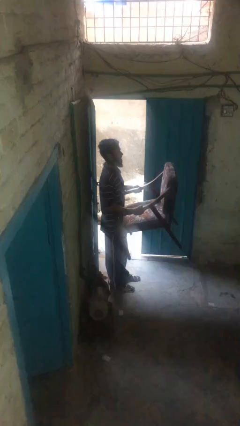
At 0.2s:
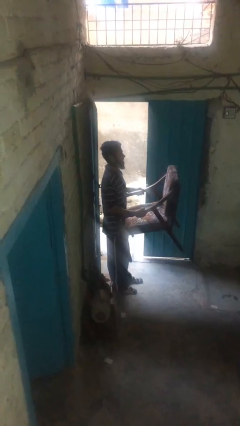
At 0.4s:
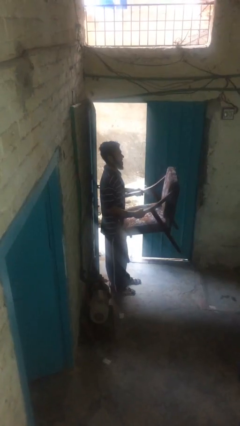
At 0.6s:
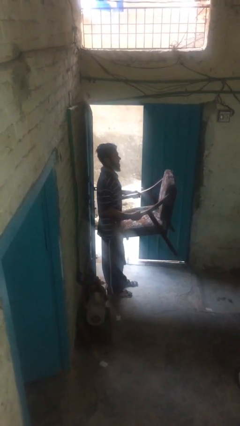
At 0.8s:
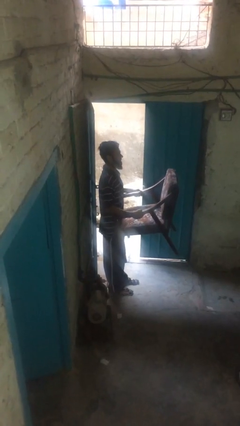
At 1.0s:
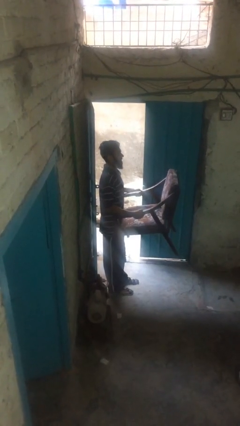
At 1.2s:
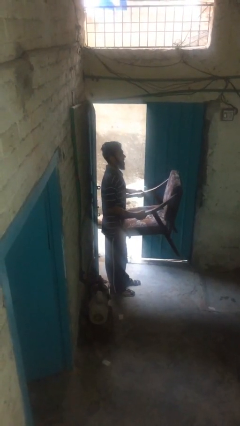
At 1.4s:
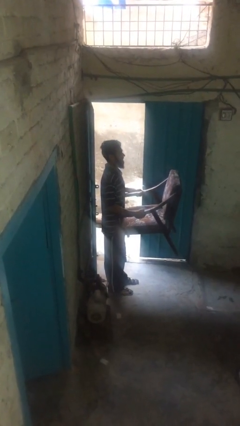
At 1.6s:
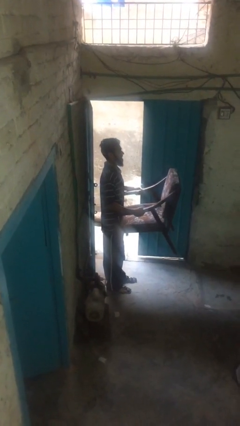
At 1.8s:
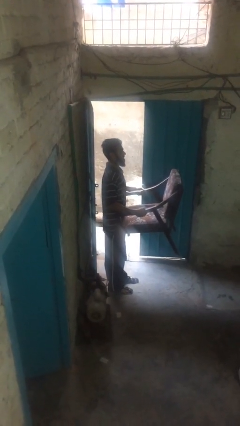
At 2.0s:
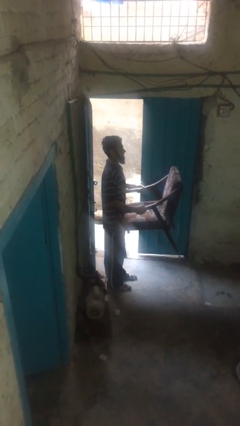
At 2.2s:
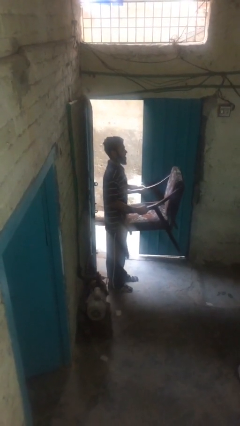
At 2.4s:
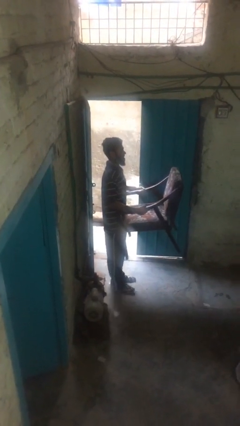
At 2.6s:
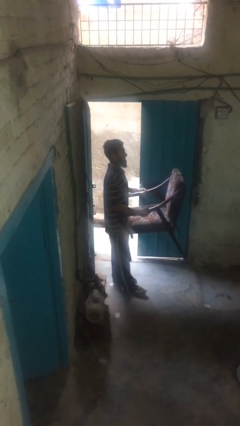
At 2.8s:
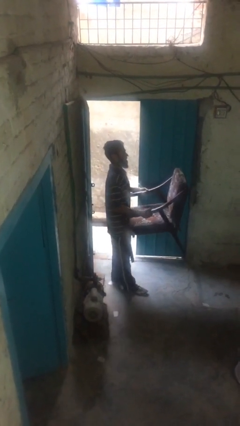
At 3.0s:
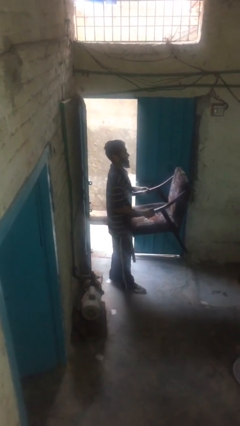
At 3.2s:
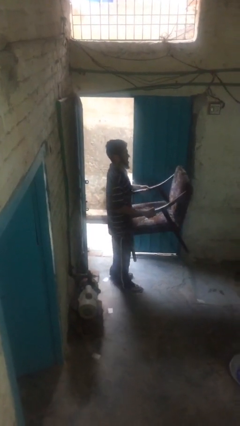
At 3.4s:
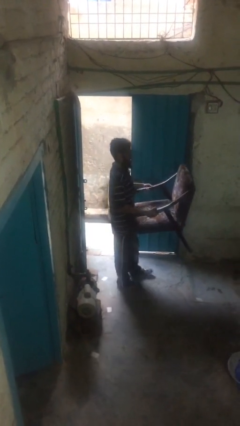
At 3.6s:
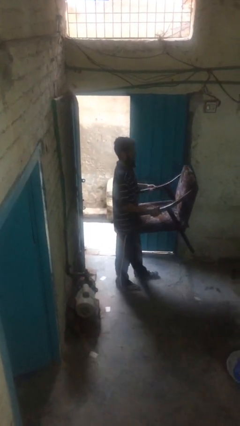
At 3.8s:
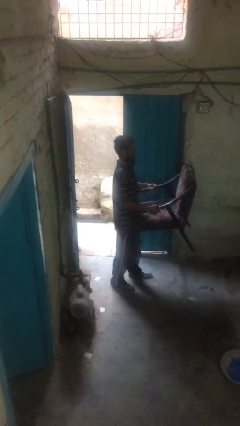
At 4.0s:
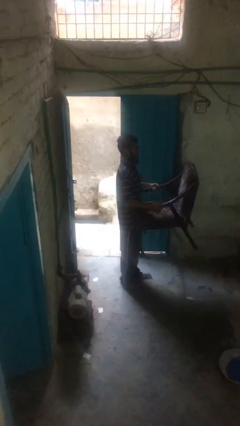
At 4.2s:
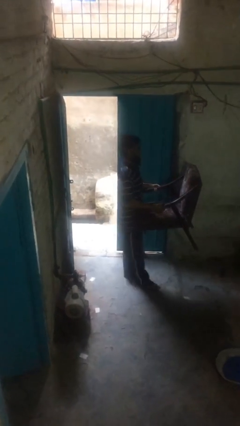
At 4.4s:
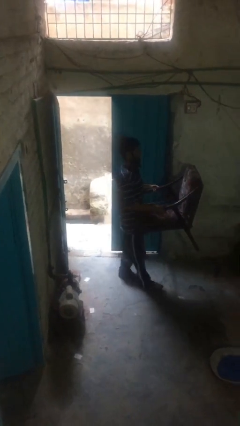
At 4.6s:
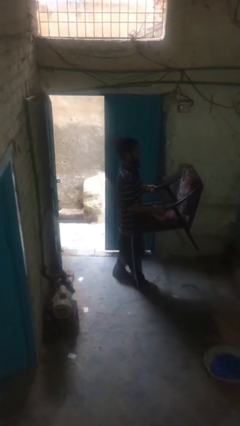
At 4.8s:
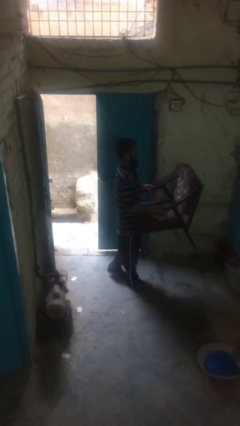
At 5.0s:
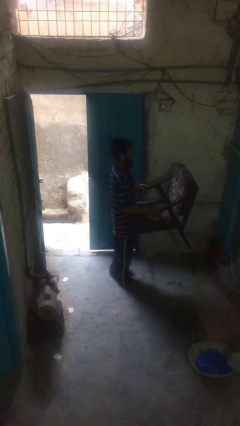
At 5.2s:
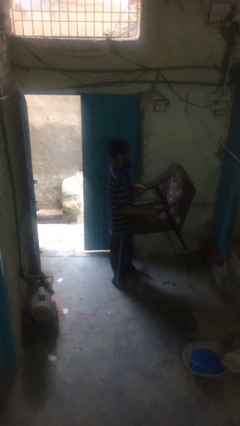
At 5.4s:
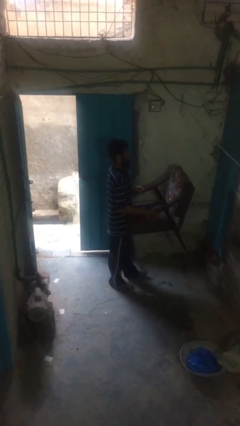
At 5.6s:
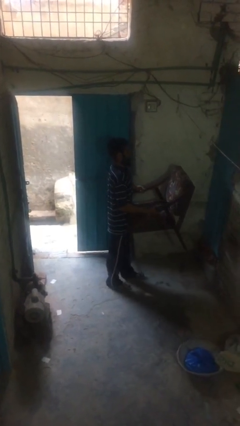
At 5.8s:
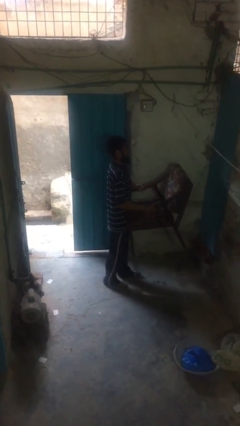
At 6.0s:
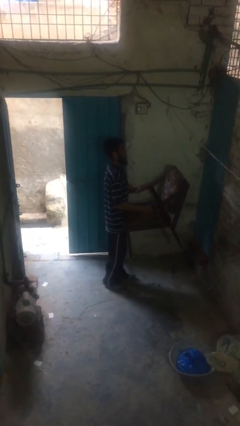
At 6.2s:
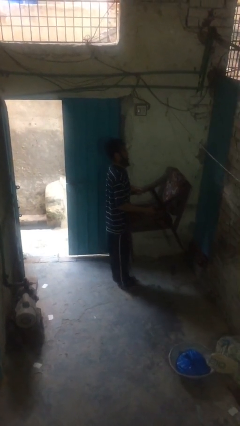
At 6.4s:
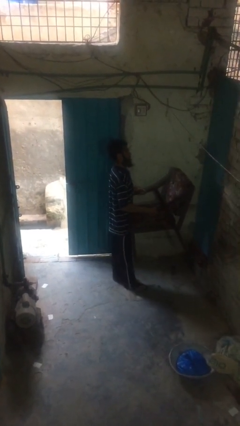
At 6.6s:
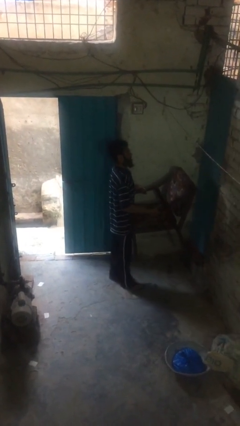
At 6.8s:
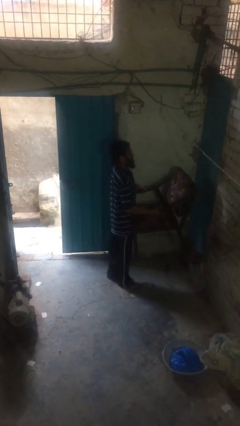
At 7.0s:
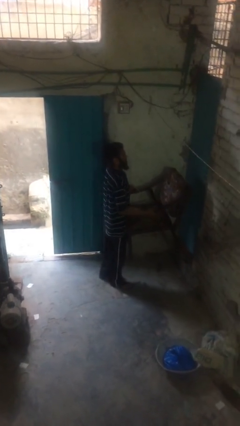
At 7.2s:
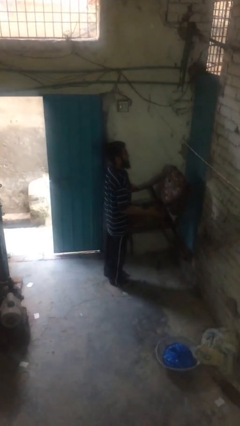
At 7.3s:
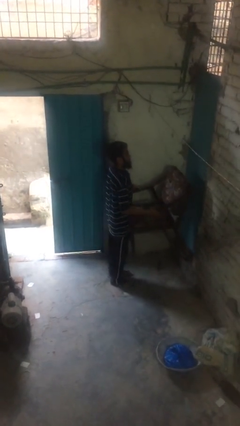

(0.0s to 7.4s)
person carries heavy object

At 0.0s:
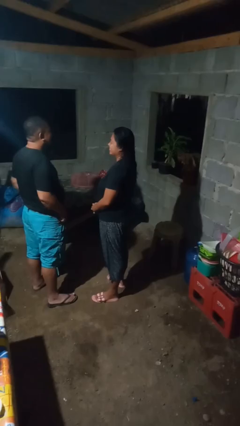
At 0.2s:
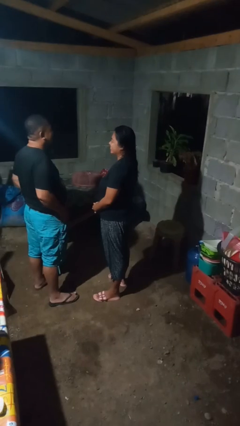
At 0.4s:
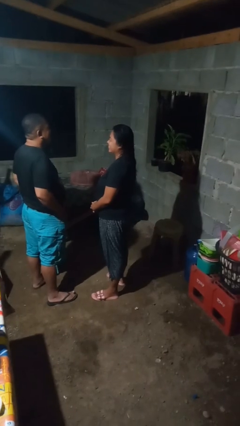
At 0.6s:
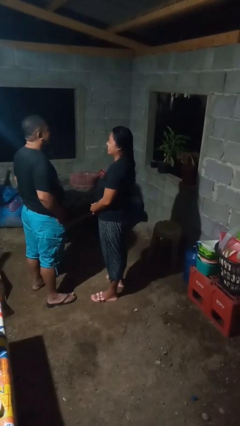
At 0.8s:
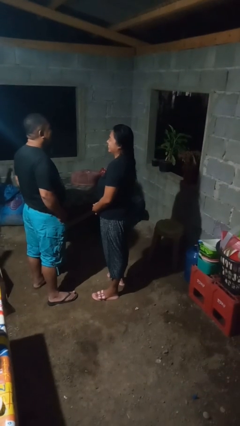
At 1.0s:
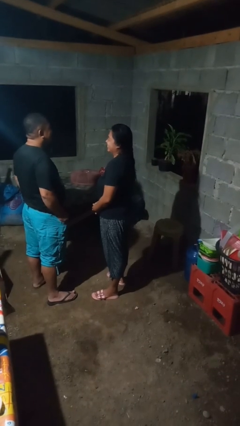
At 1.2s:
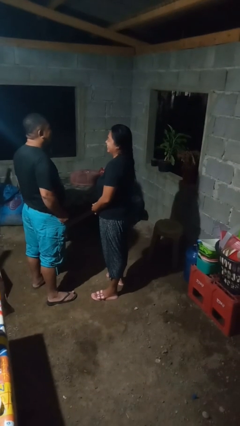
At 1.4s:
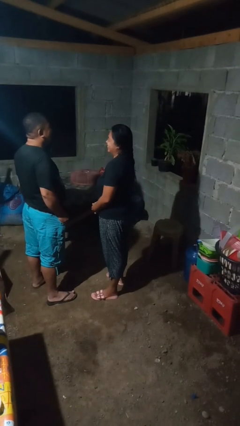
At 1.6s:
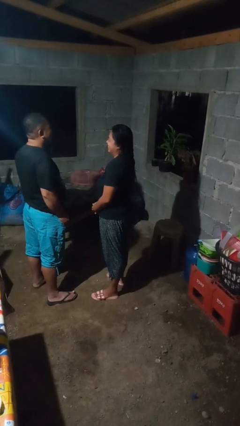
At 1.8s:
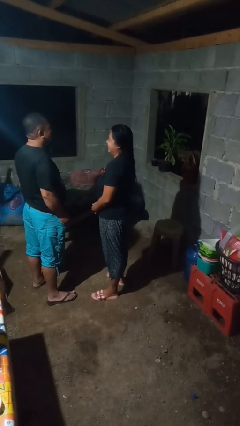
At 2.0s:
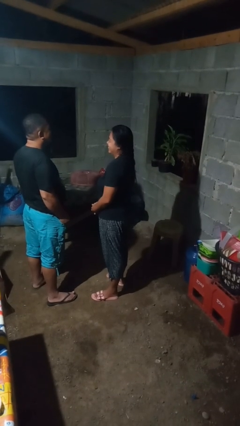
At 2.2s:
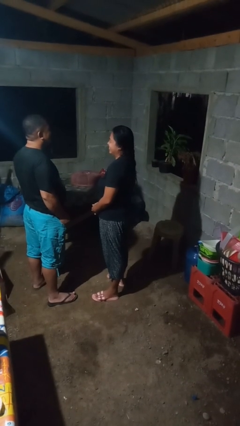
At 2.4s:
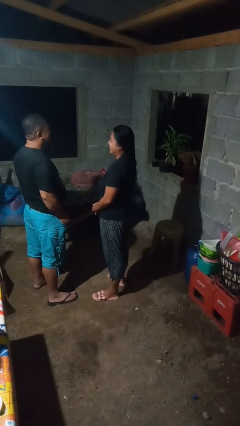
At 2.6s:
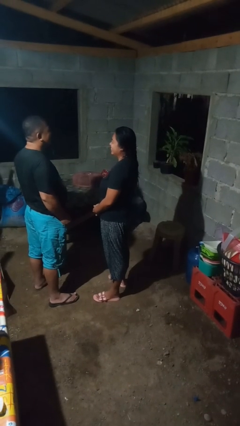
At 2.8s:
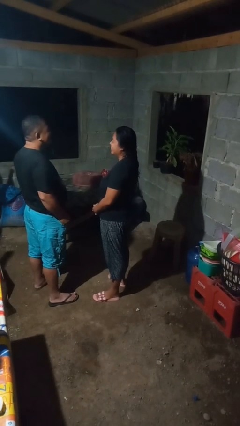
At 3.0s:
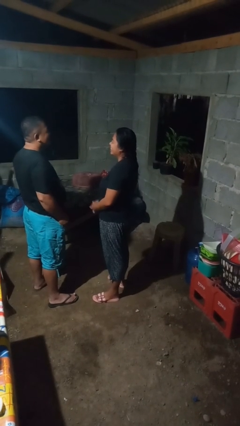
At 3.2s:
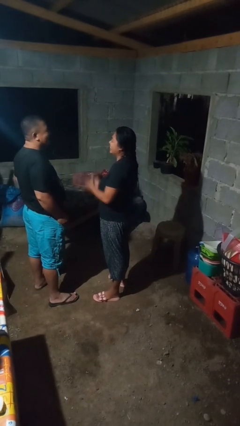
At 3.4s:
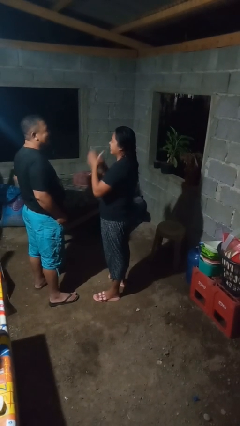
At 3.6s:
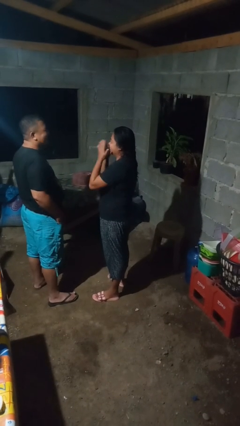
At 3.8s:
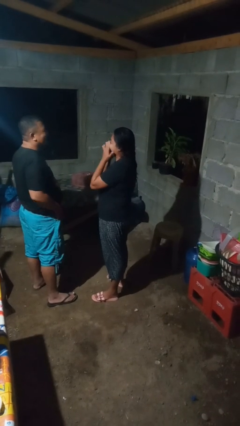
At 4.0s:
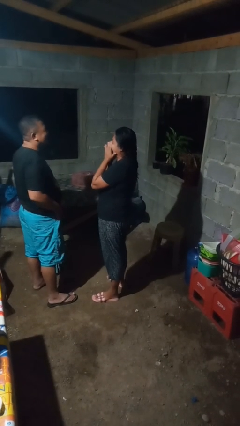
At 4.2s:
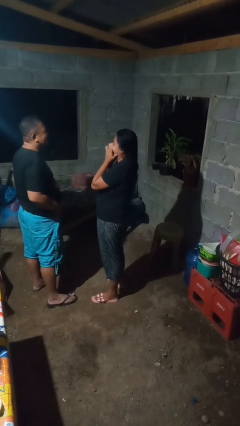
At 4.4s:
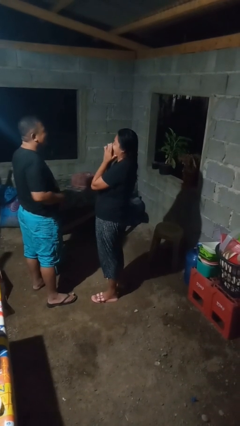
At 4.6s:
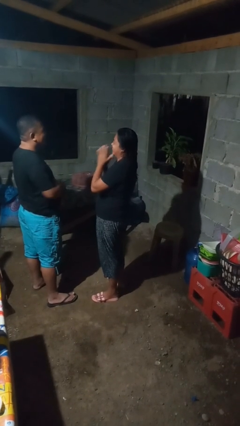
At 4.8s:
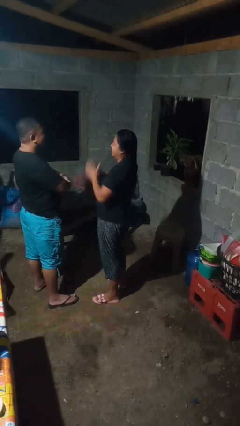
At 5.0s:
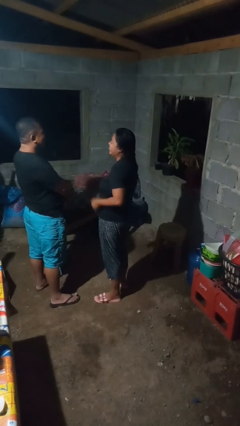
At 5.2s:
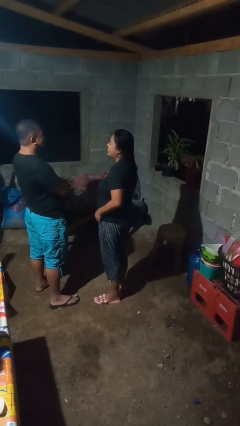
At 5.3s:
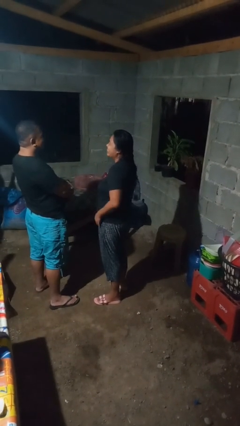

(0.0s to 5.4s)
person laughs with person

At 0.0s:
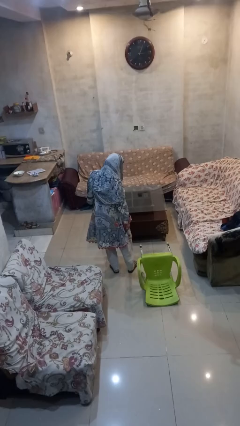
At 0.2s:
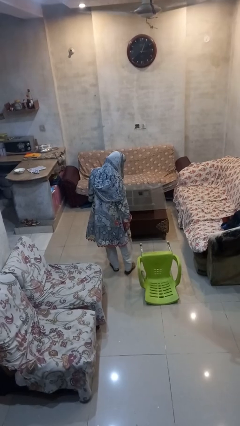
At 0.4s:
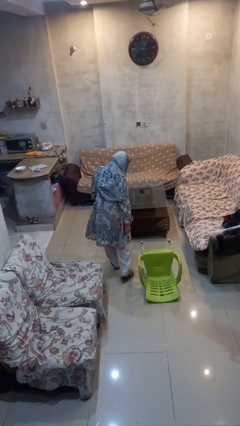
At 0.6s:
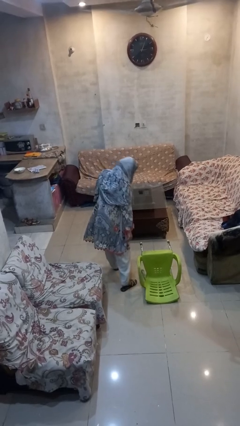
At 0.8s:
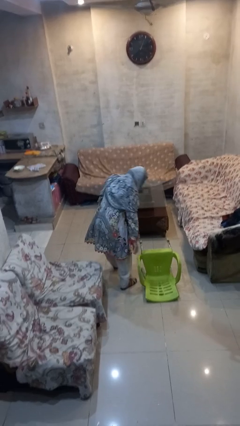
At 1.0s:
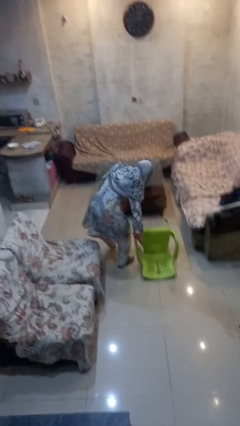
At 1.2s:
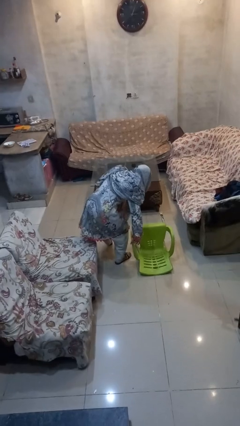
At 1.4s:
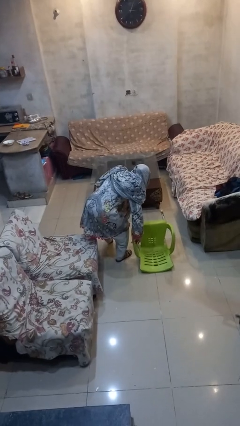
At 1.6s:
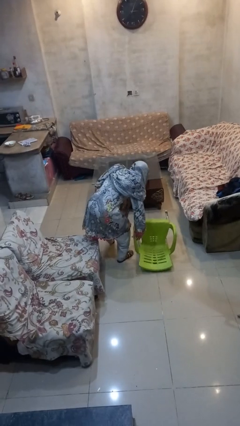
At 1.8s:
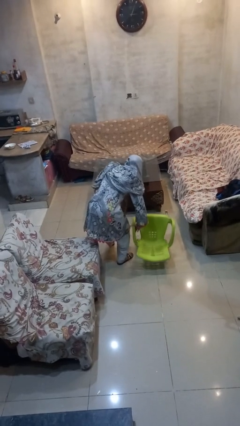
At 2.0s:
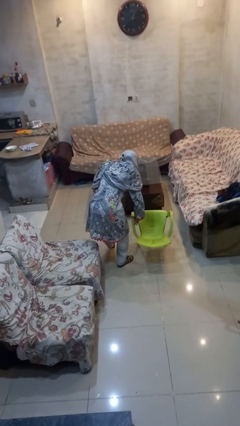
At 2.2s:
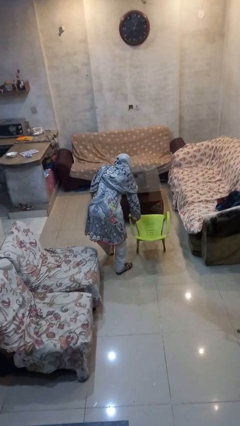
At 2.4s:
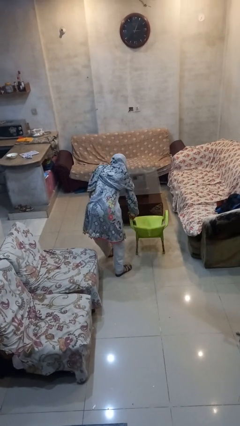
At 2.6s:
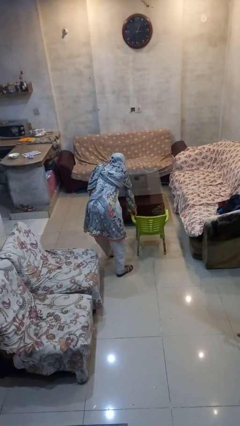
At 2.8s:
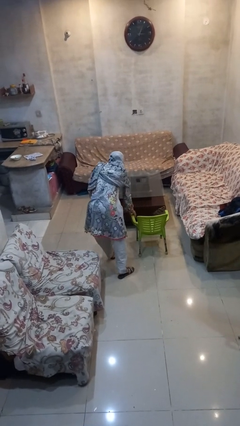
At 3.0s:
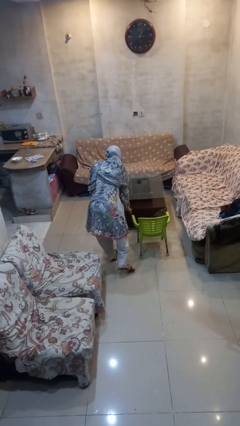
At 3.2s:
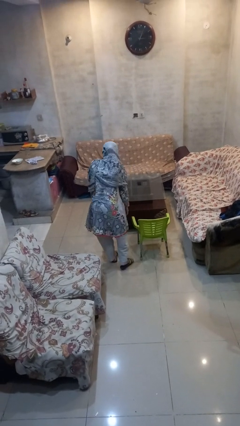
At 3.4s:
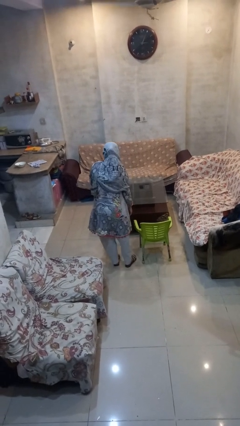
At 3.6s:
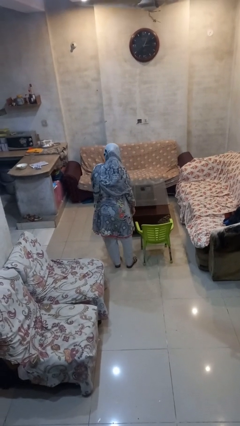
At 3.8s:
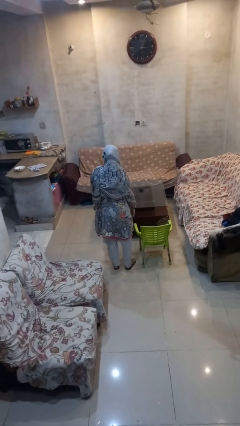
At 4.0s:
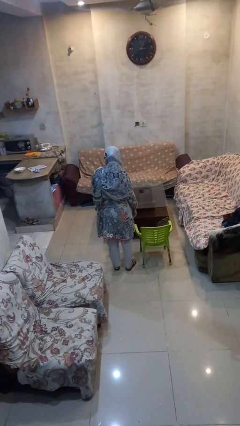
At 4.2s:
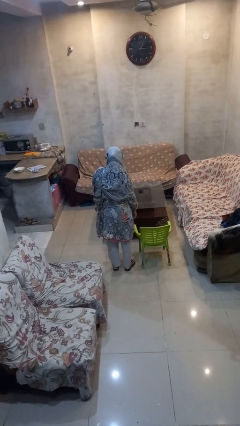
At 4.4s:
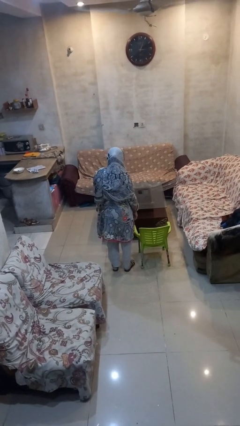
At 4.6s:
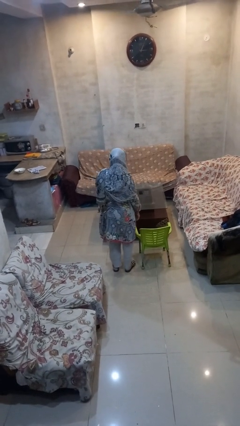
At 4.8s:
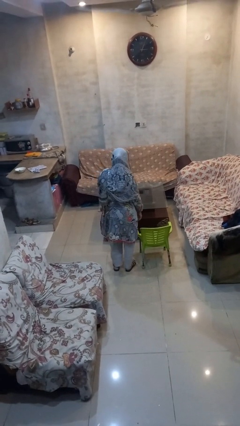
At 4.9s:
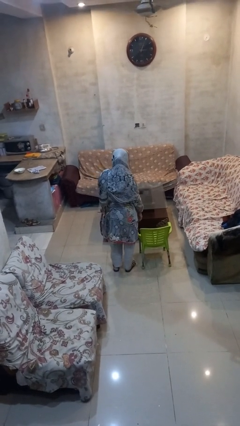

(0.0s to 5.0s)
person sets upright furniture

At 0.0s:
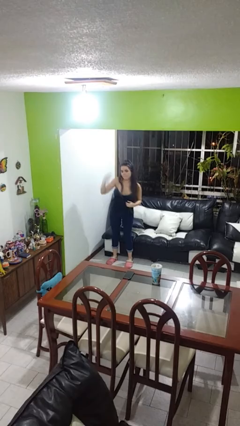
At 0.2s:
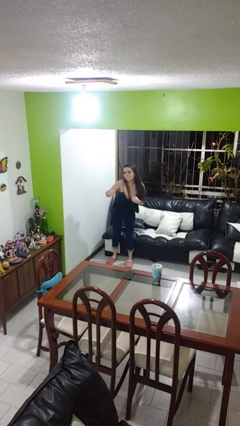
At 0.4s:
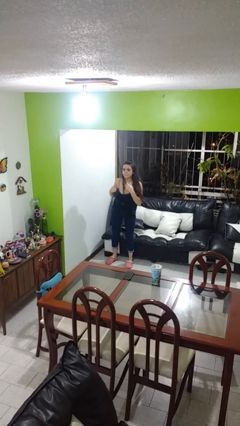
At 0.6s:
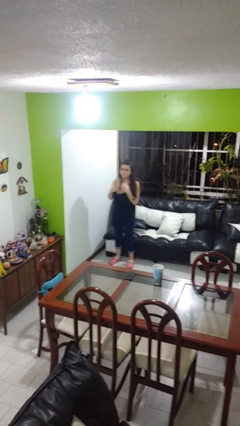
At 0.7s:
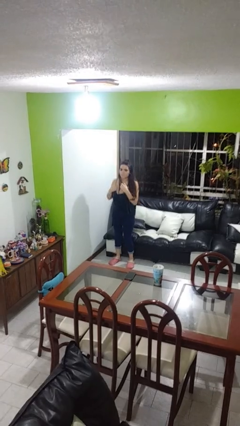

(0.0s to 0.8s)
person karate chop
